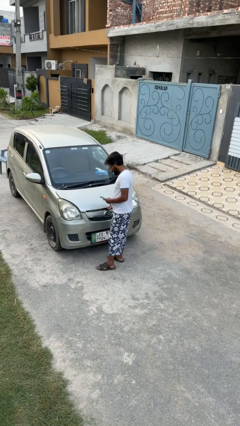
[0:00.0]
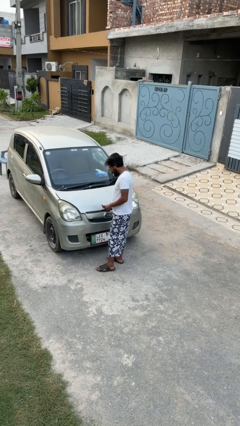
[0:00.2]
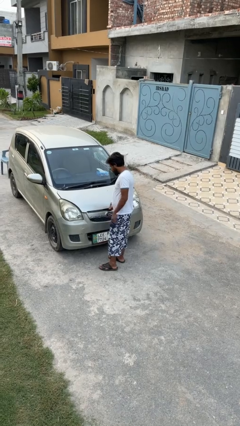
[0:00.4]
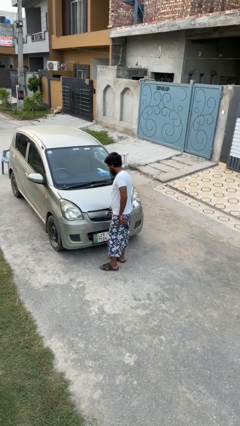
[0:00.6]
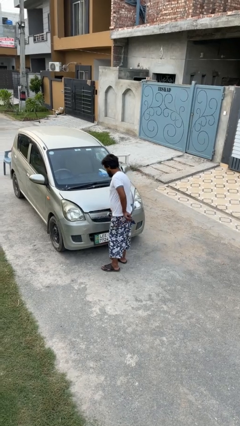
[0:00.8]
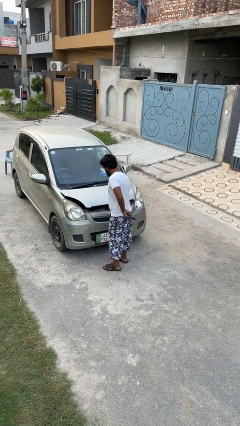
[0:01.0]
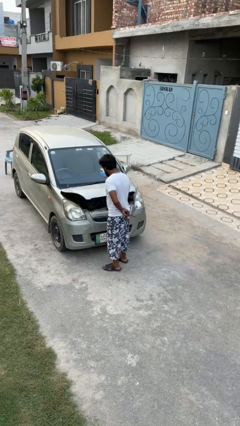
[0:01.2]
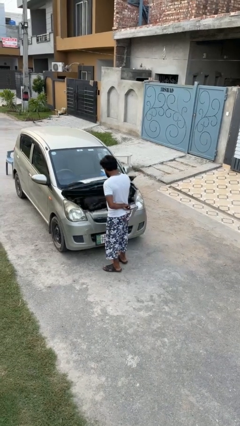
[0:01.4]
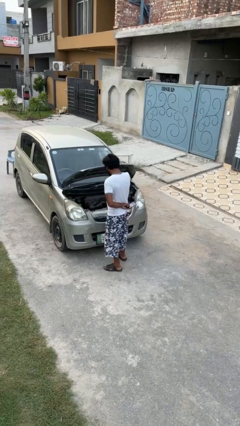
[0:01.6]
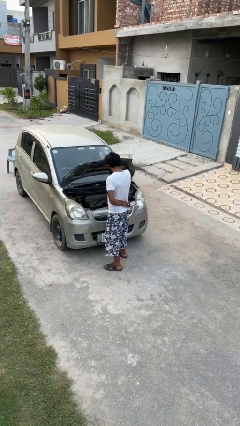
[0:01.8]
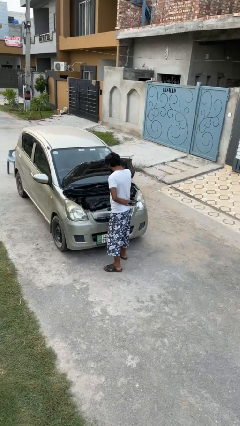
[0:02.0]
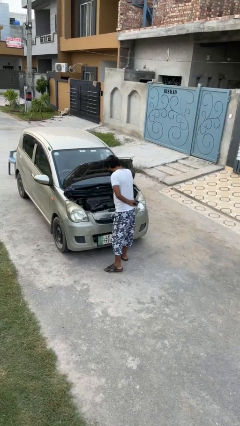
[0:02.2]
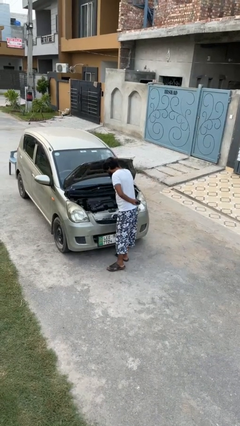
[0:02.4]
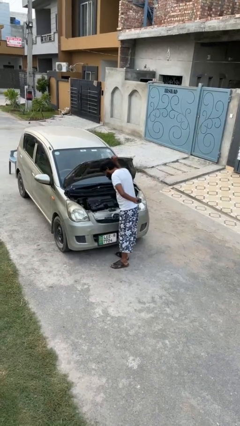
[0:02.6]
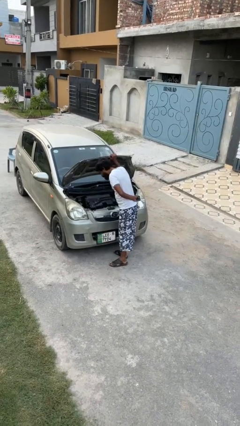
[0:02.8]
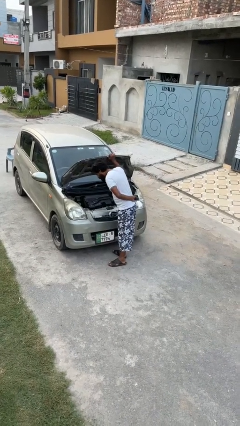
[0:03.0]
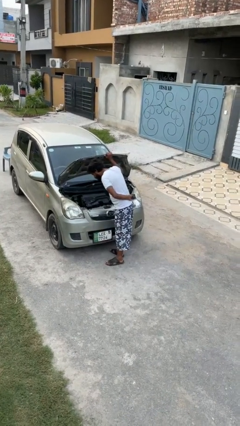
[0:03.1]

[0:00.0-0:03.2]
person opens car hood

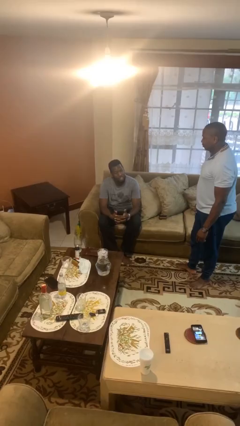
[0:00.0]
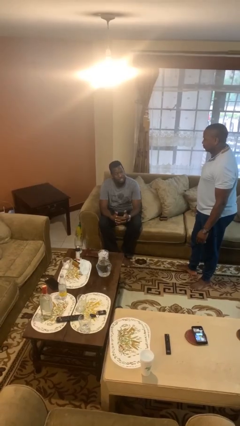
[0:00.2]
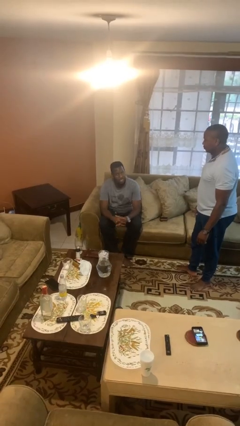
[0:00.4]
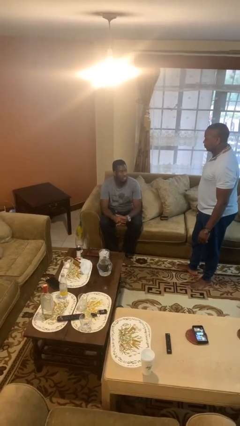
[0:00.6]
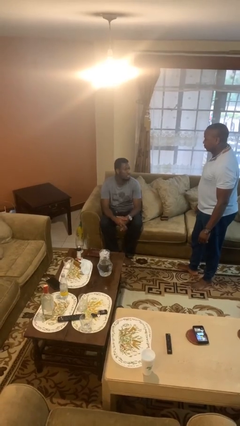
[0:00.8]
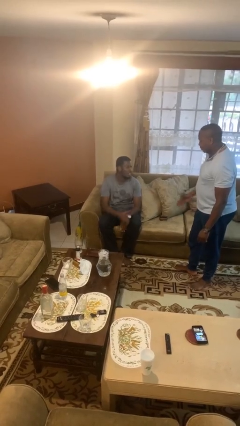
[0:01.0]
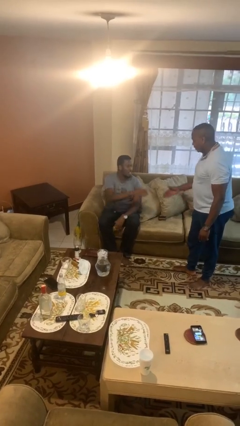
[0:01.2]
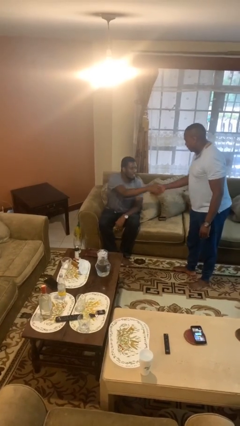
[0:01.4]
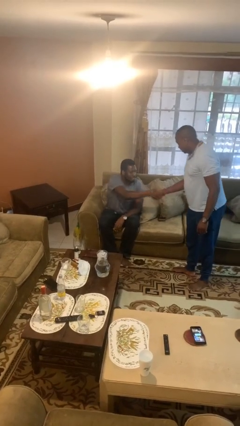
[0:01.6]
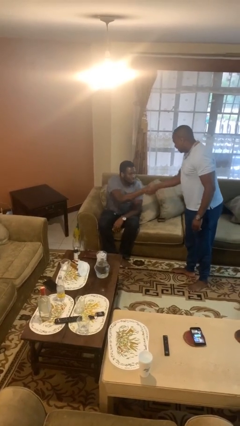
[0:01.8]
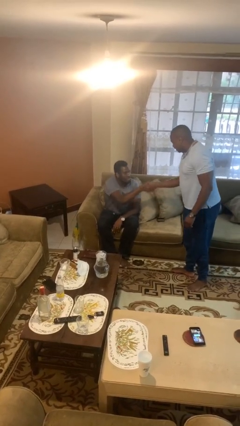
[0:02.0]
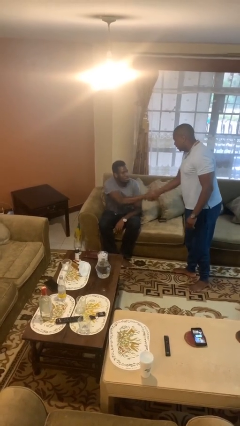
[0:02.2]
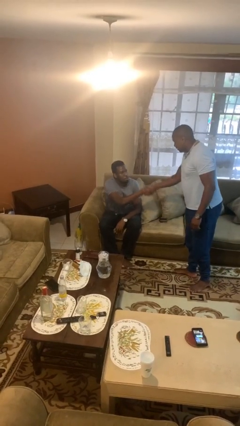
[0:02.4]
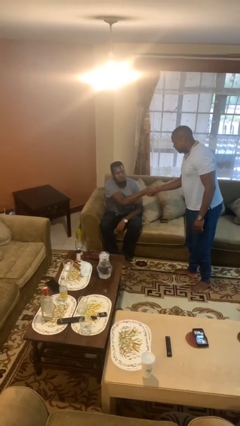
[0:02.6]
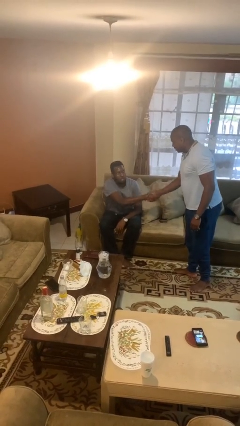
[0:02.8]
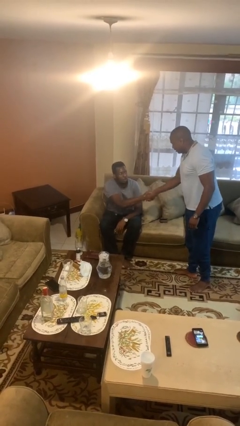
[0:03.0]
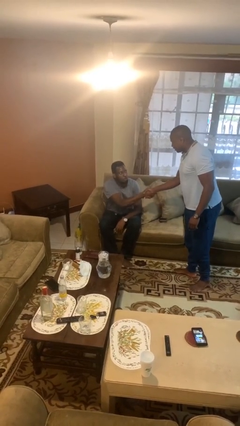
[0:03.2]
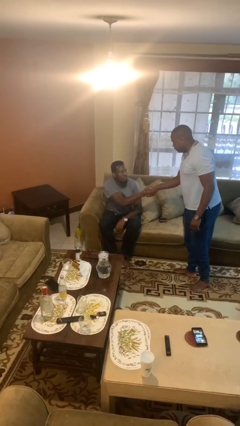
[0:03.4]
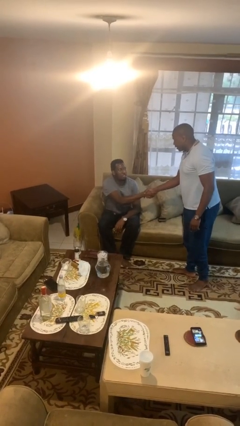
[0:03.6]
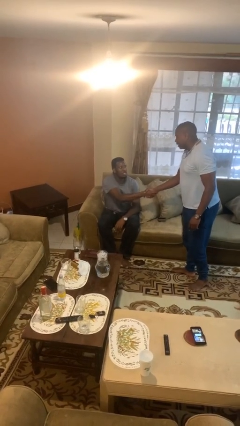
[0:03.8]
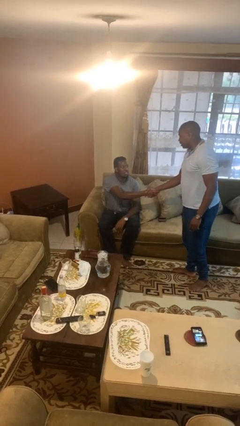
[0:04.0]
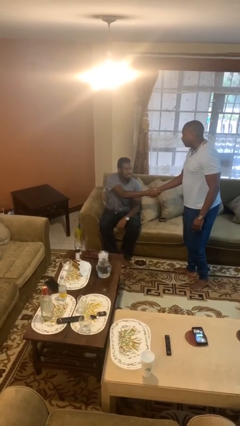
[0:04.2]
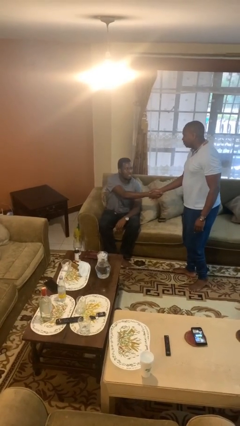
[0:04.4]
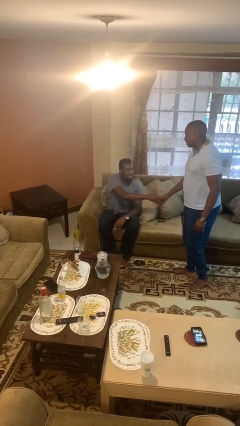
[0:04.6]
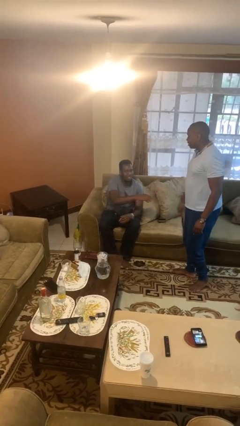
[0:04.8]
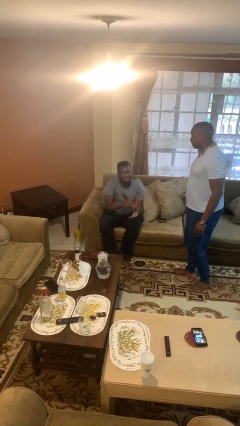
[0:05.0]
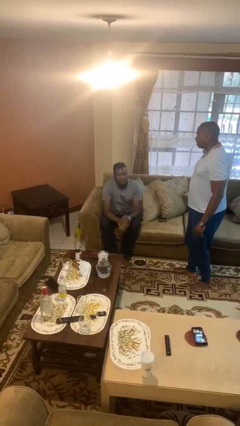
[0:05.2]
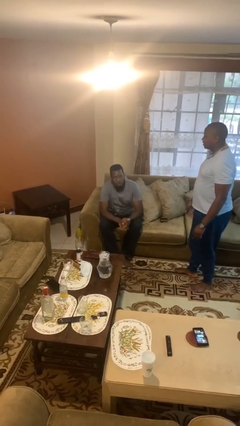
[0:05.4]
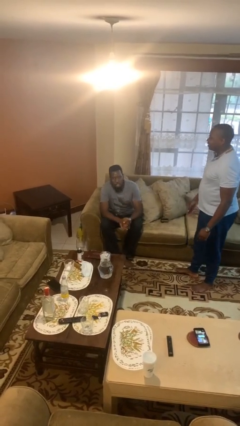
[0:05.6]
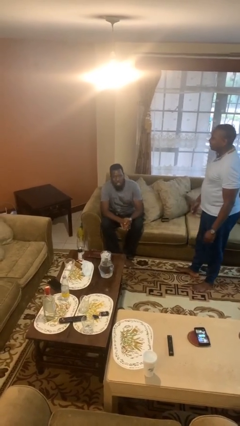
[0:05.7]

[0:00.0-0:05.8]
person shakes hand

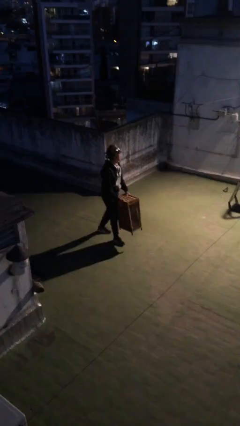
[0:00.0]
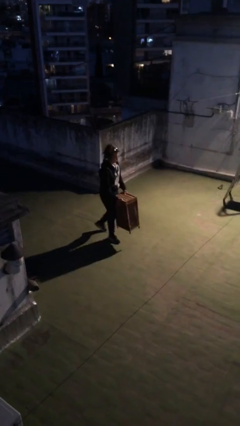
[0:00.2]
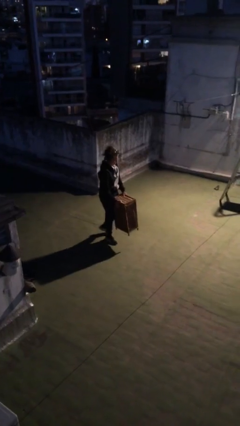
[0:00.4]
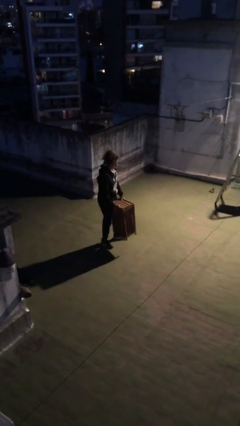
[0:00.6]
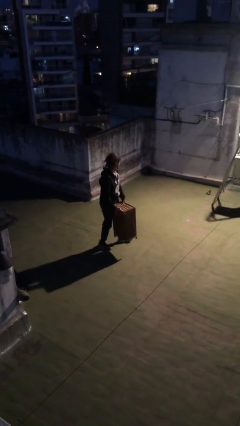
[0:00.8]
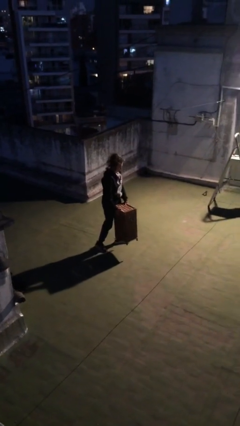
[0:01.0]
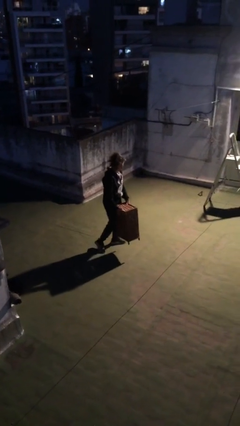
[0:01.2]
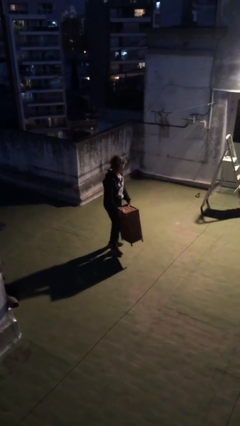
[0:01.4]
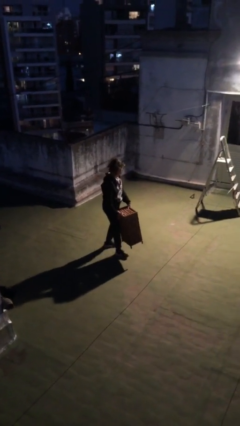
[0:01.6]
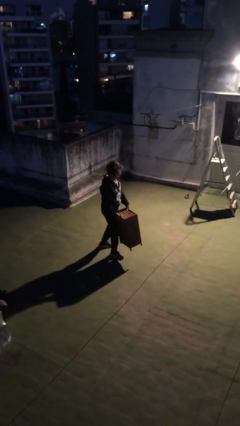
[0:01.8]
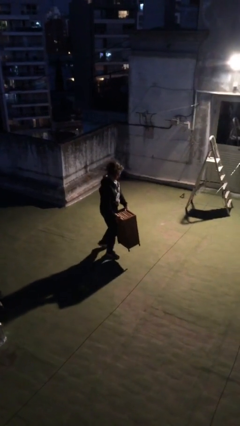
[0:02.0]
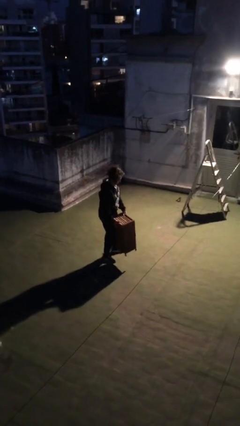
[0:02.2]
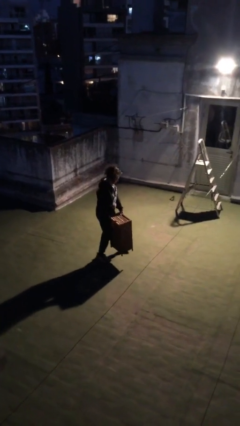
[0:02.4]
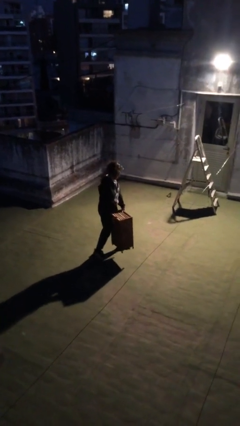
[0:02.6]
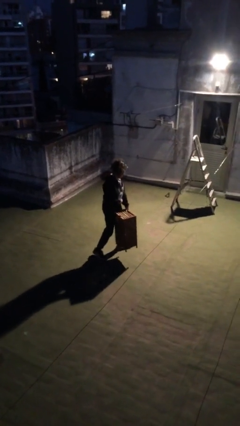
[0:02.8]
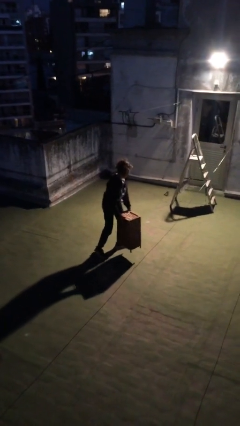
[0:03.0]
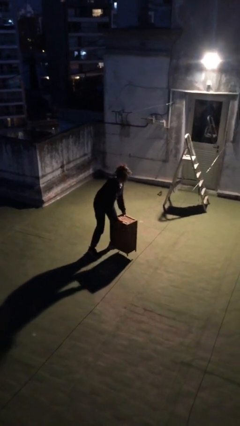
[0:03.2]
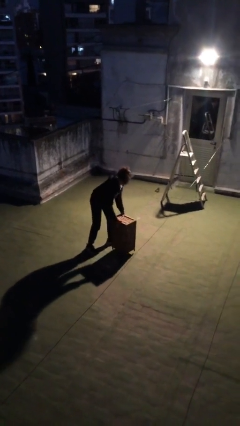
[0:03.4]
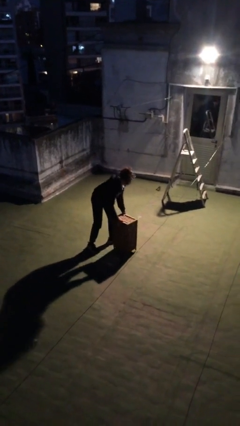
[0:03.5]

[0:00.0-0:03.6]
person carries heavy object

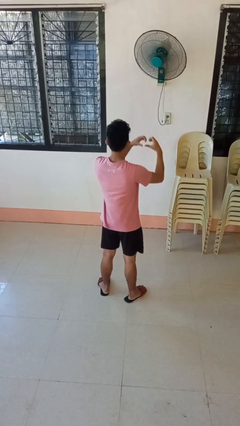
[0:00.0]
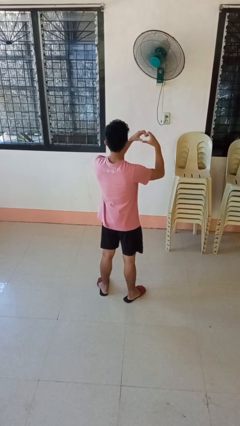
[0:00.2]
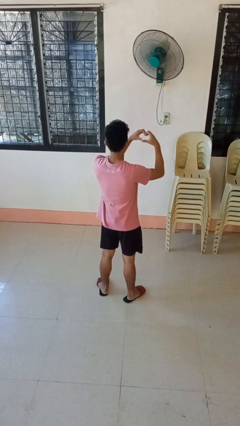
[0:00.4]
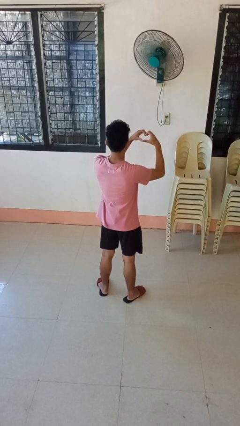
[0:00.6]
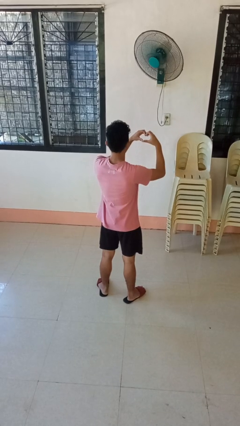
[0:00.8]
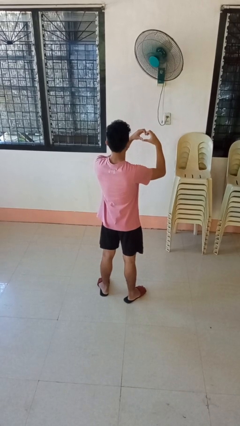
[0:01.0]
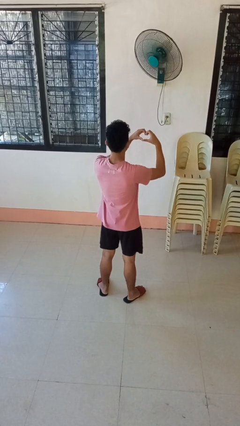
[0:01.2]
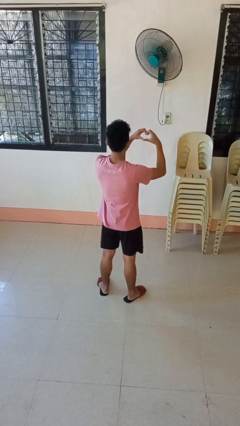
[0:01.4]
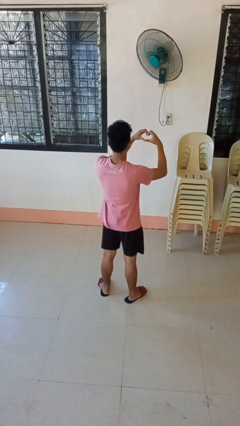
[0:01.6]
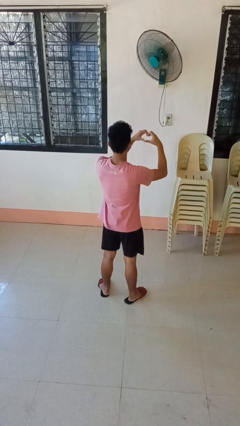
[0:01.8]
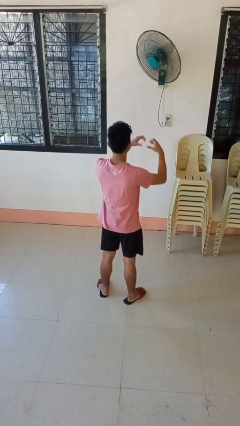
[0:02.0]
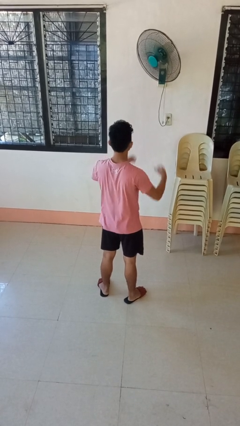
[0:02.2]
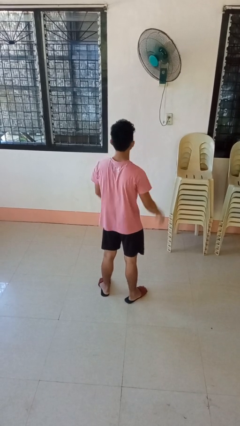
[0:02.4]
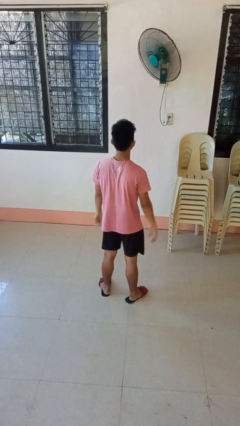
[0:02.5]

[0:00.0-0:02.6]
person gestures heart

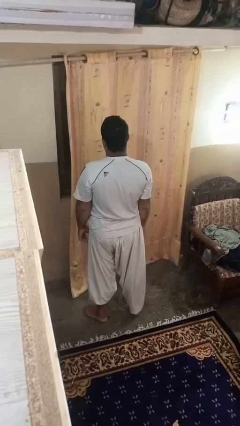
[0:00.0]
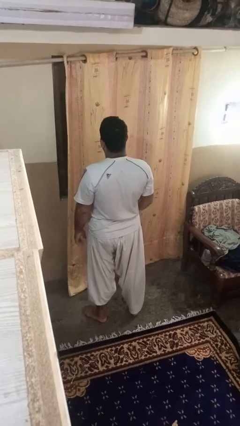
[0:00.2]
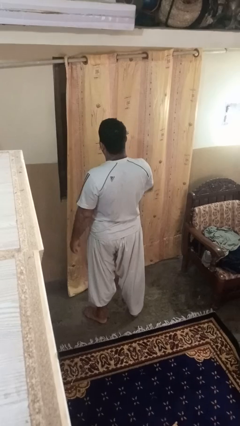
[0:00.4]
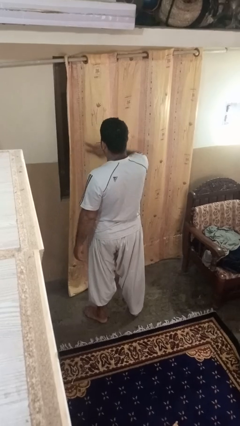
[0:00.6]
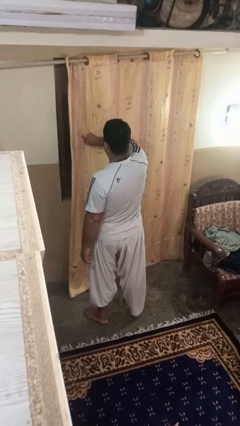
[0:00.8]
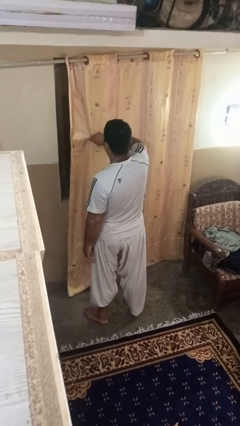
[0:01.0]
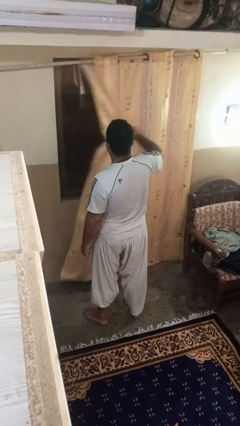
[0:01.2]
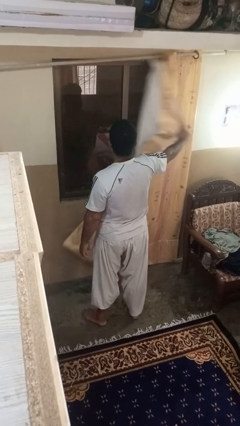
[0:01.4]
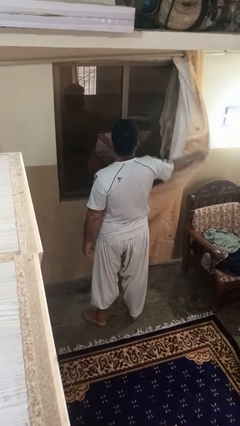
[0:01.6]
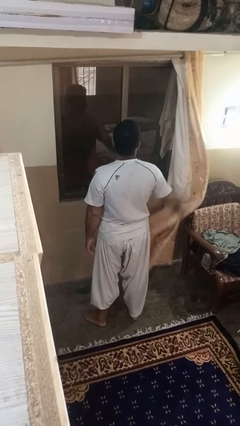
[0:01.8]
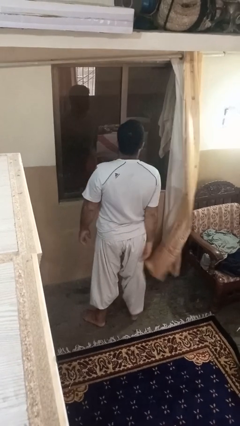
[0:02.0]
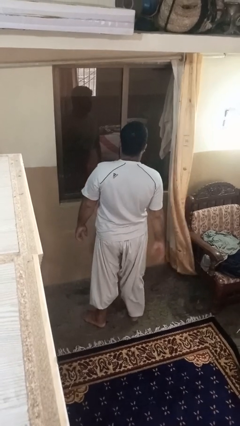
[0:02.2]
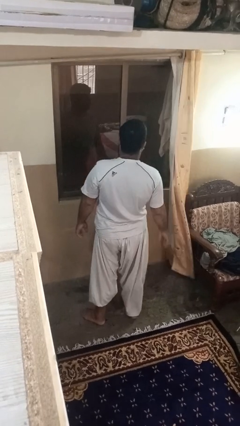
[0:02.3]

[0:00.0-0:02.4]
person opens curtains
